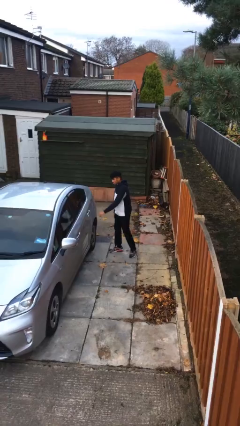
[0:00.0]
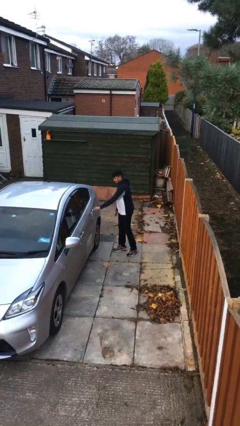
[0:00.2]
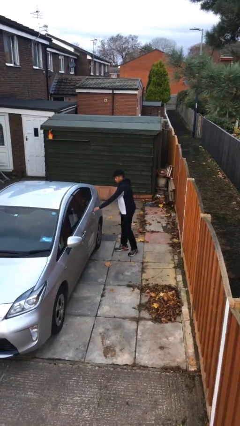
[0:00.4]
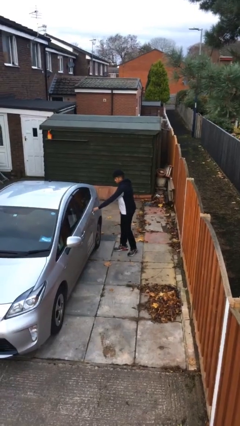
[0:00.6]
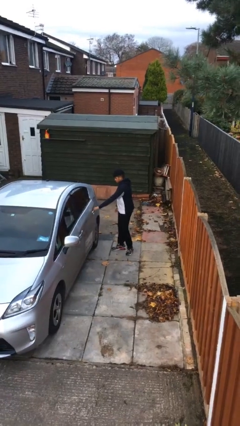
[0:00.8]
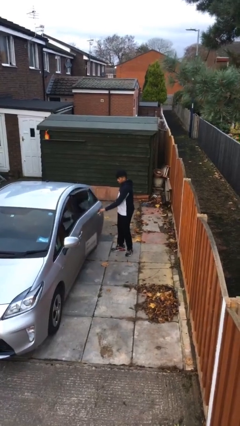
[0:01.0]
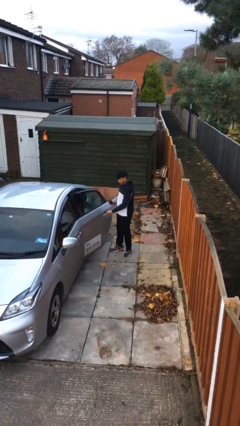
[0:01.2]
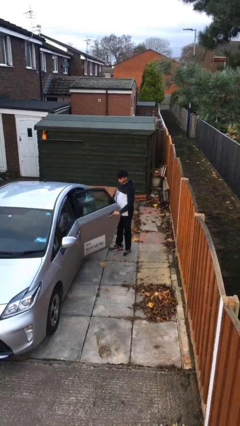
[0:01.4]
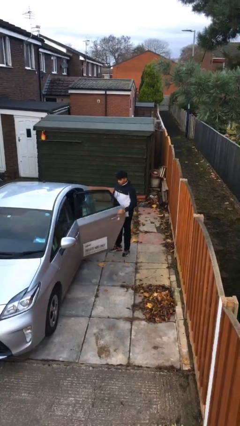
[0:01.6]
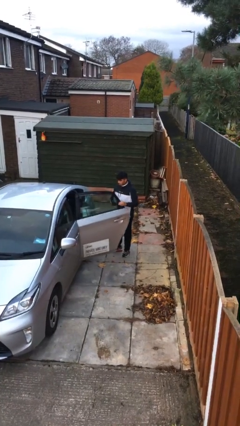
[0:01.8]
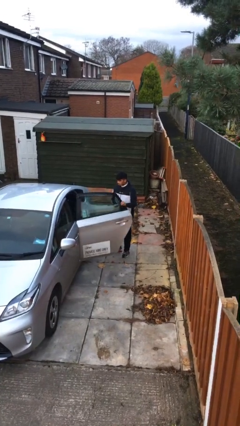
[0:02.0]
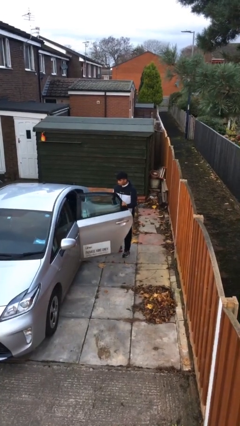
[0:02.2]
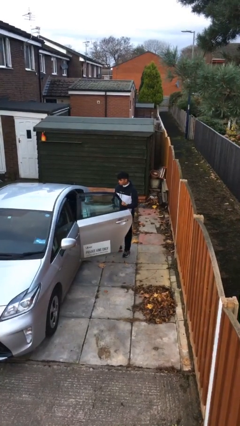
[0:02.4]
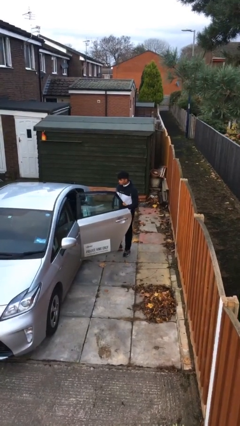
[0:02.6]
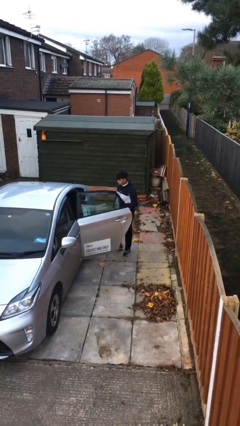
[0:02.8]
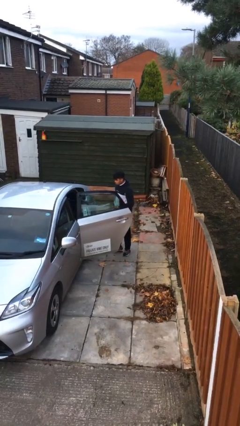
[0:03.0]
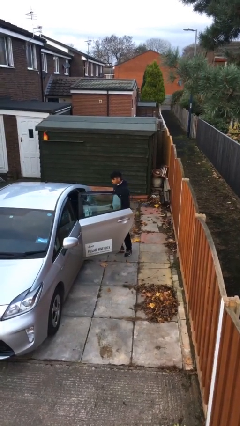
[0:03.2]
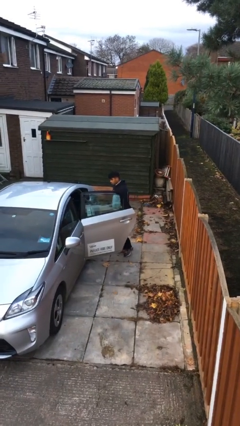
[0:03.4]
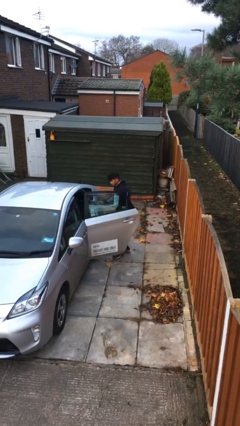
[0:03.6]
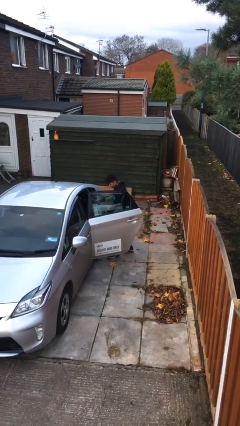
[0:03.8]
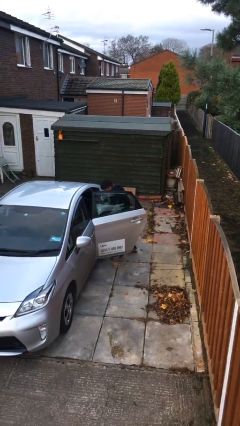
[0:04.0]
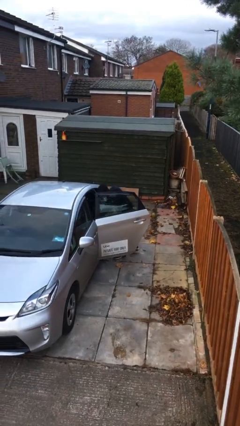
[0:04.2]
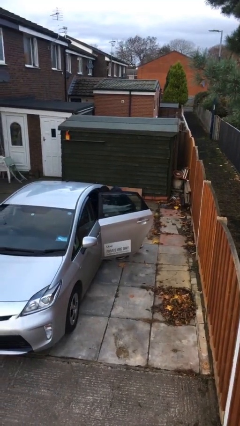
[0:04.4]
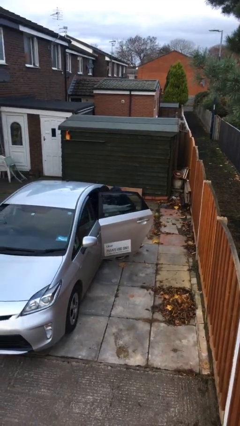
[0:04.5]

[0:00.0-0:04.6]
person opens car door

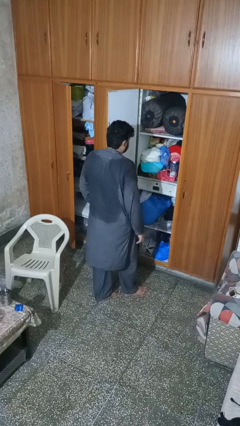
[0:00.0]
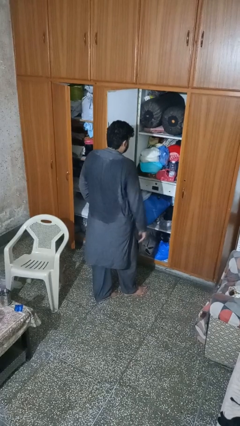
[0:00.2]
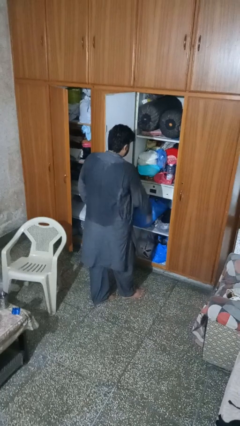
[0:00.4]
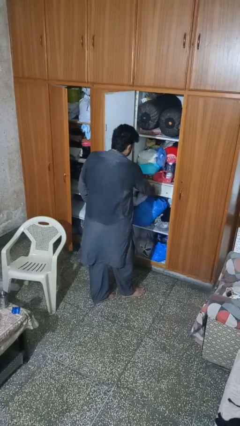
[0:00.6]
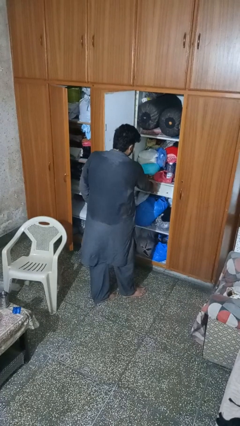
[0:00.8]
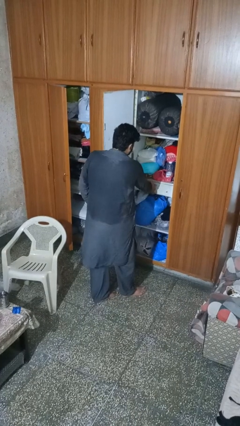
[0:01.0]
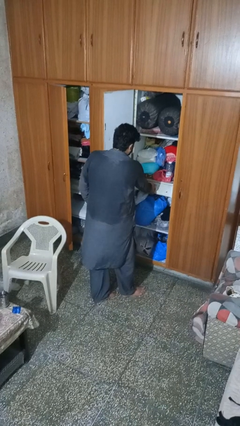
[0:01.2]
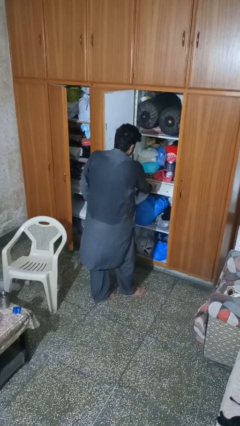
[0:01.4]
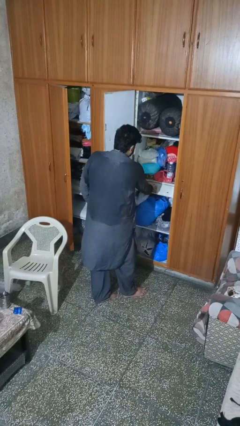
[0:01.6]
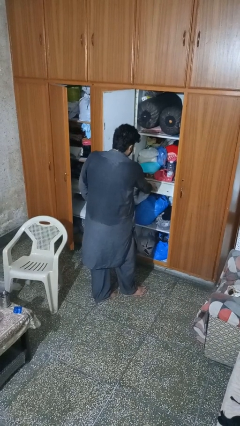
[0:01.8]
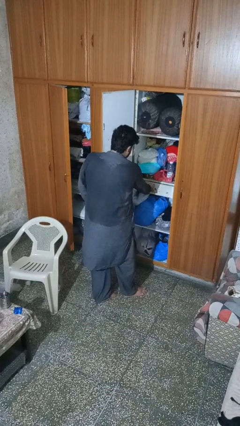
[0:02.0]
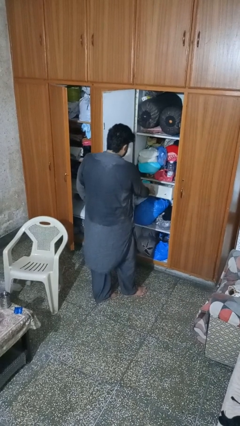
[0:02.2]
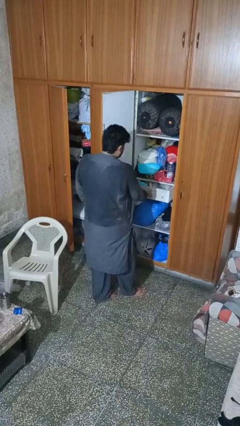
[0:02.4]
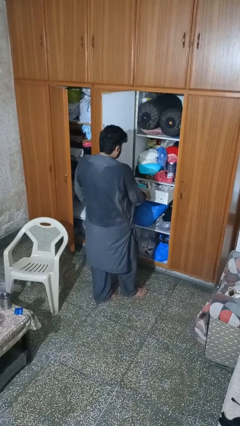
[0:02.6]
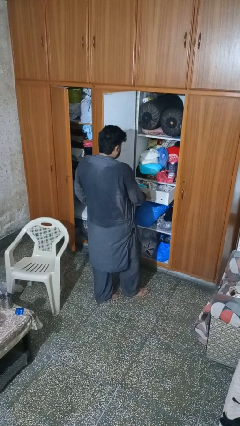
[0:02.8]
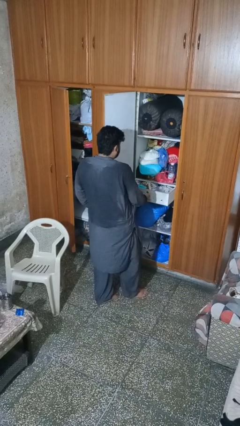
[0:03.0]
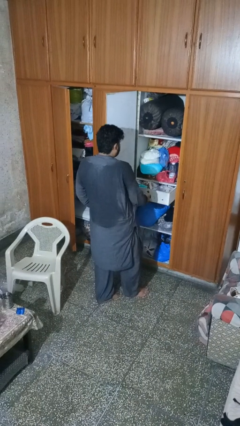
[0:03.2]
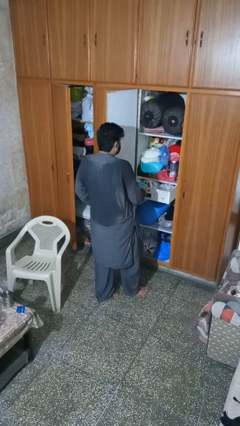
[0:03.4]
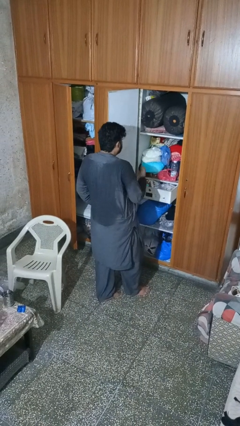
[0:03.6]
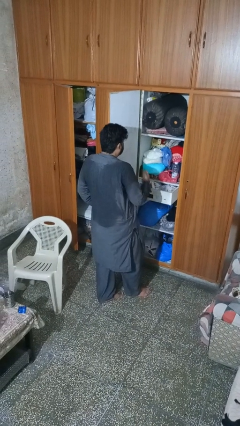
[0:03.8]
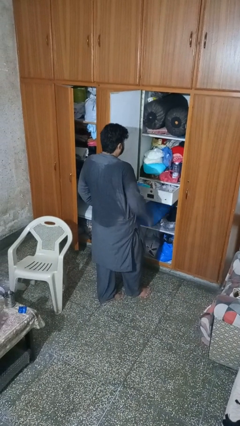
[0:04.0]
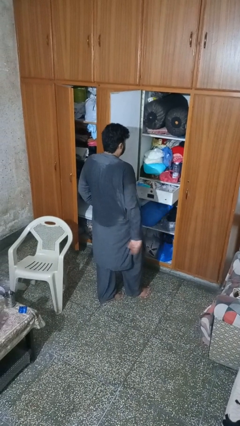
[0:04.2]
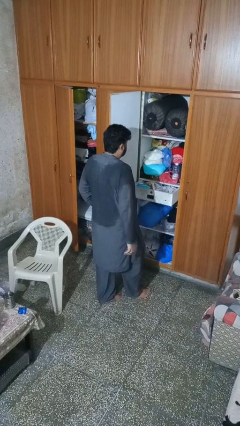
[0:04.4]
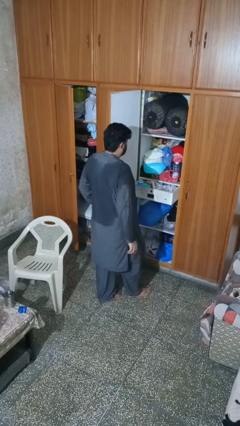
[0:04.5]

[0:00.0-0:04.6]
person opens dresser drawer

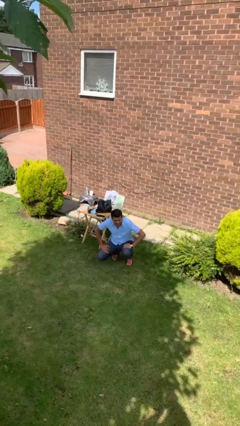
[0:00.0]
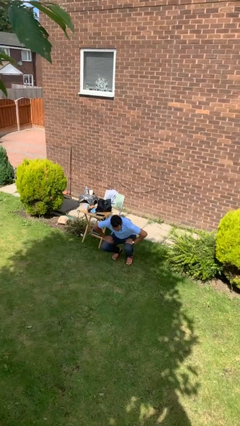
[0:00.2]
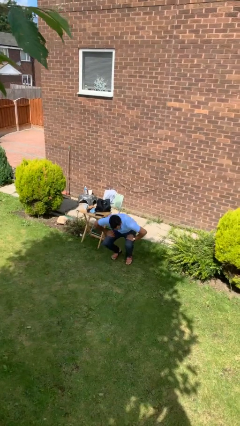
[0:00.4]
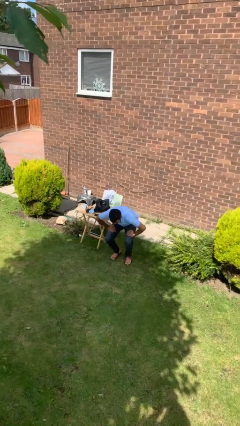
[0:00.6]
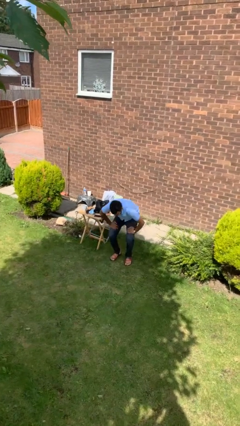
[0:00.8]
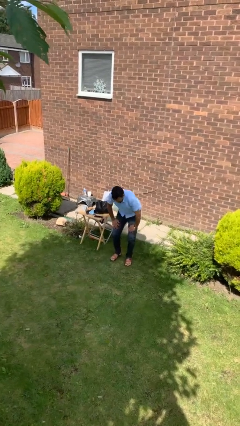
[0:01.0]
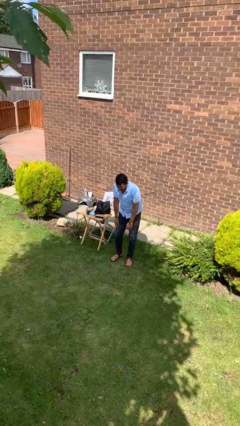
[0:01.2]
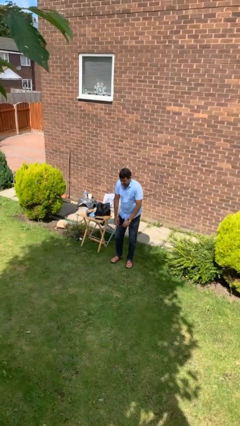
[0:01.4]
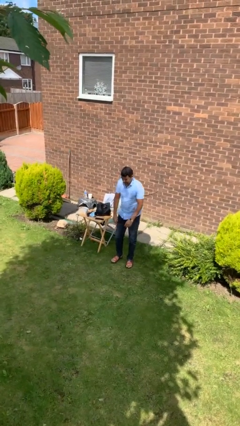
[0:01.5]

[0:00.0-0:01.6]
person stands up from floor

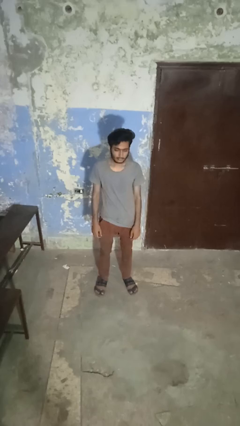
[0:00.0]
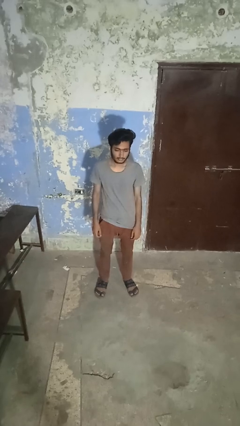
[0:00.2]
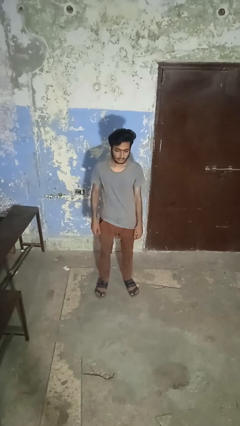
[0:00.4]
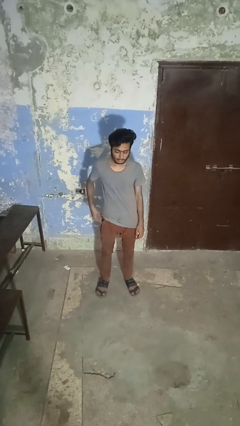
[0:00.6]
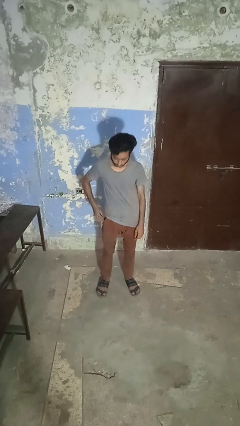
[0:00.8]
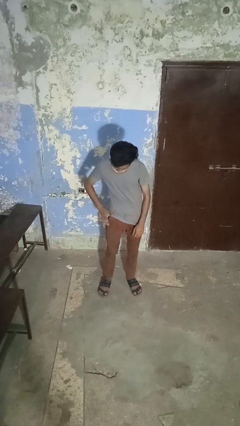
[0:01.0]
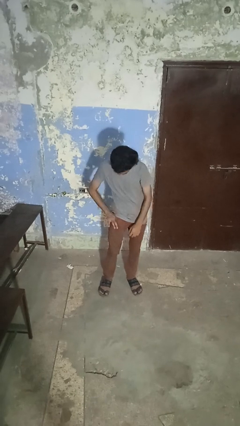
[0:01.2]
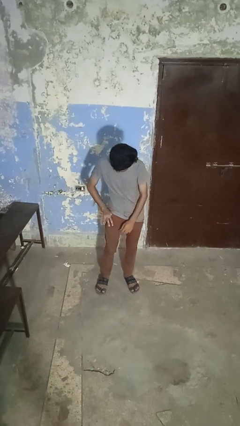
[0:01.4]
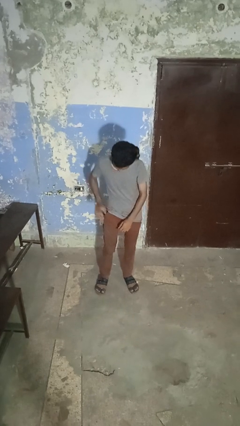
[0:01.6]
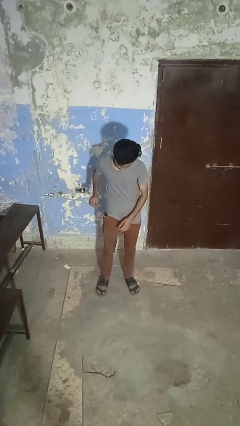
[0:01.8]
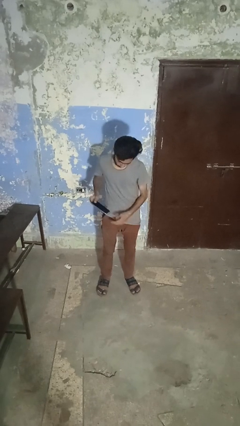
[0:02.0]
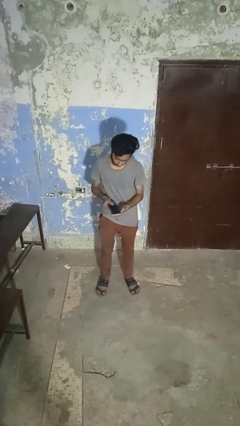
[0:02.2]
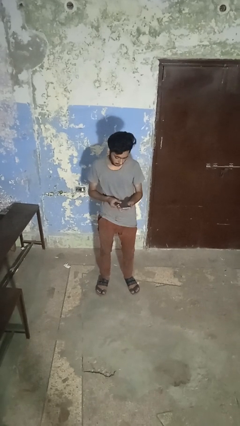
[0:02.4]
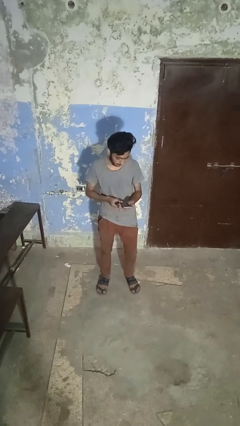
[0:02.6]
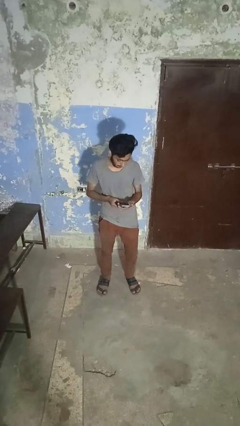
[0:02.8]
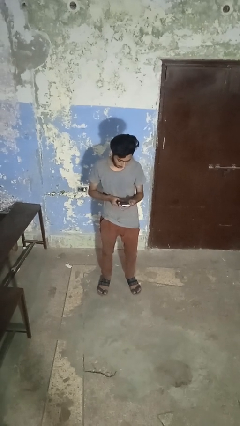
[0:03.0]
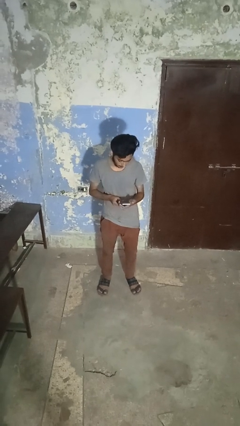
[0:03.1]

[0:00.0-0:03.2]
person takes phone from pocket

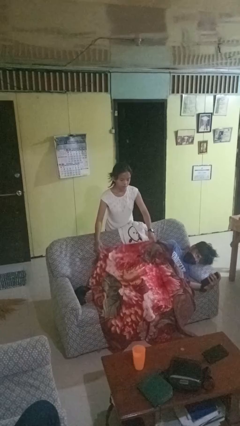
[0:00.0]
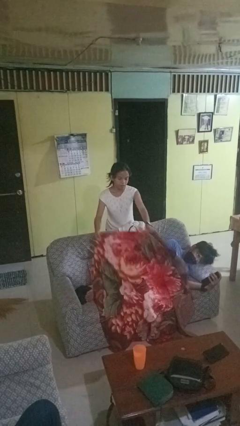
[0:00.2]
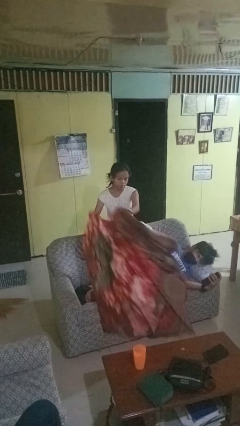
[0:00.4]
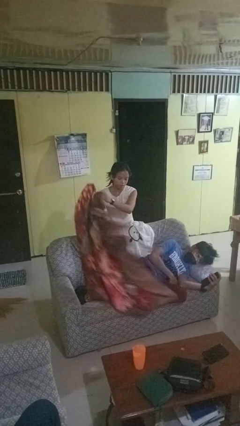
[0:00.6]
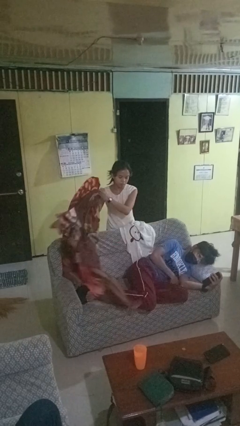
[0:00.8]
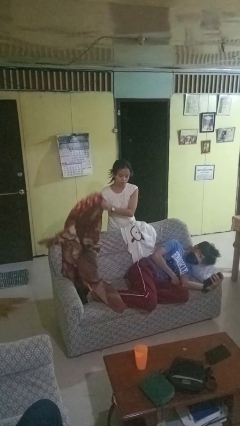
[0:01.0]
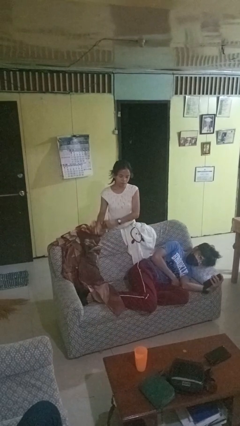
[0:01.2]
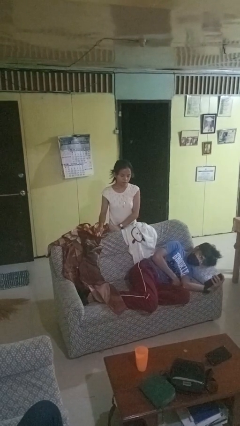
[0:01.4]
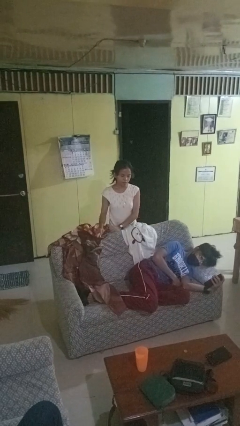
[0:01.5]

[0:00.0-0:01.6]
person uncovers friend with blanket

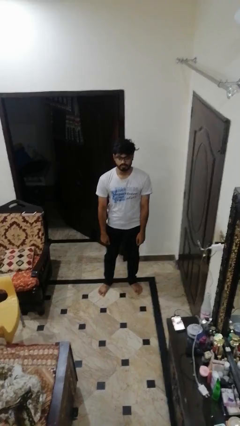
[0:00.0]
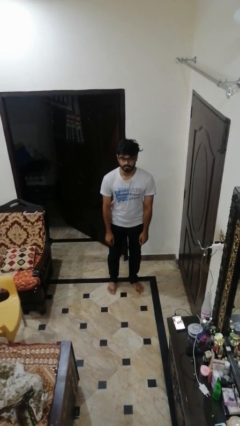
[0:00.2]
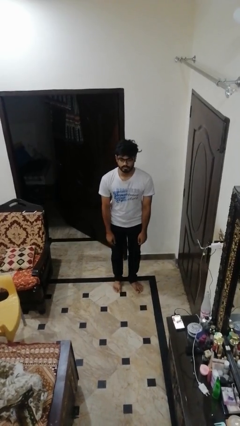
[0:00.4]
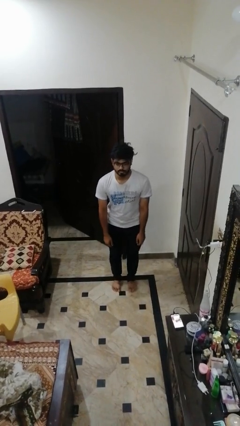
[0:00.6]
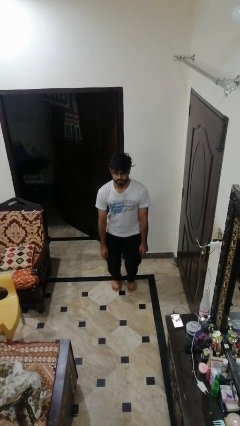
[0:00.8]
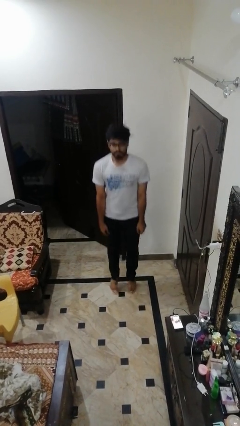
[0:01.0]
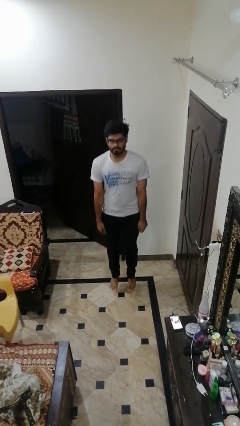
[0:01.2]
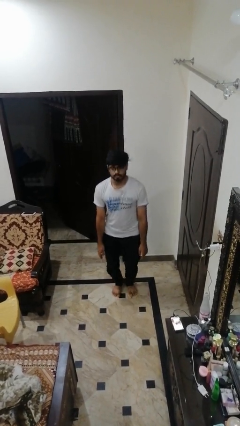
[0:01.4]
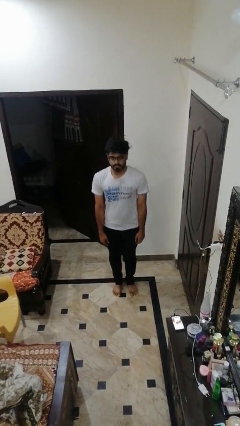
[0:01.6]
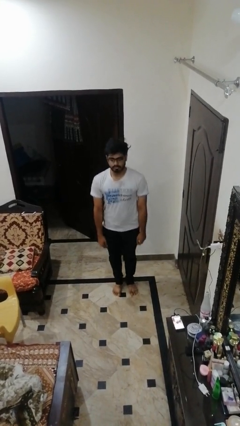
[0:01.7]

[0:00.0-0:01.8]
person jumps
